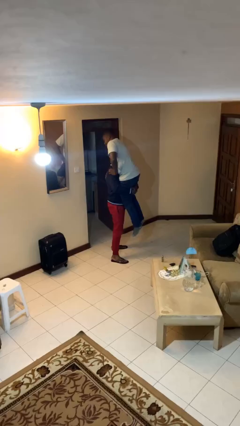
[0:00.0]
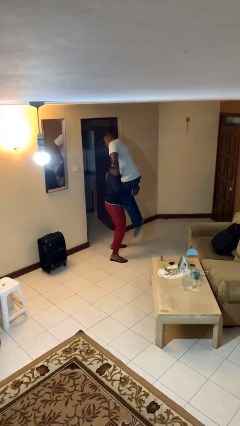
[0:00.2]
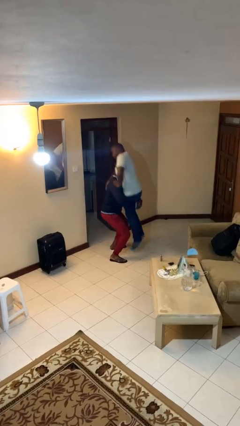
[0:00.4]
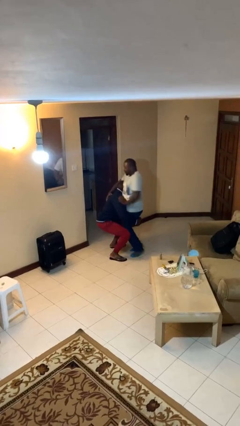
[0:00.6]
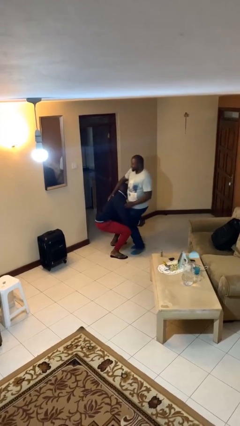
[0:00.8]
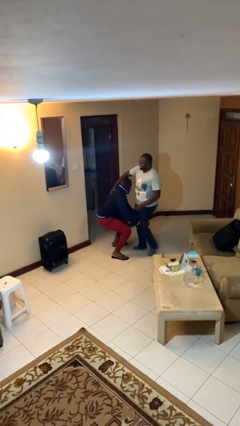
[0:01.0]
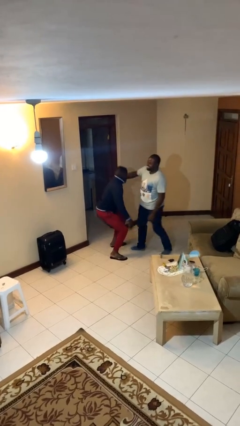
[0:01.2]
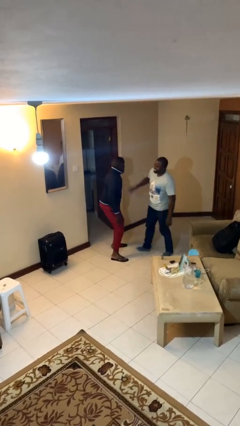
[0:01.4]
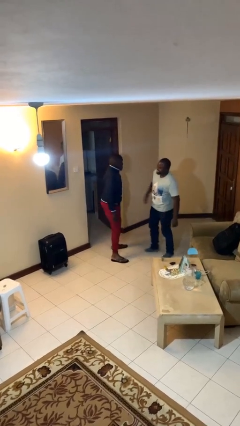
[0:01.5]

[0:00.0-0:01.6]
person puts down person

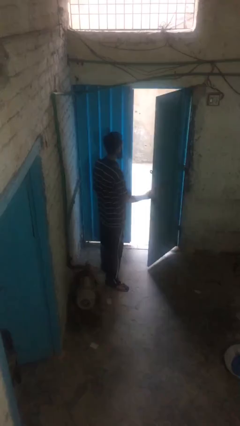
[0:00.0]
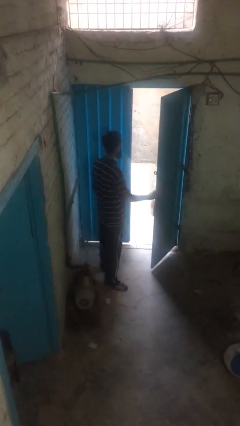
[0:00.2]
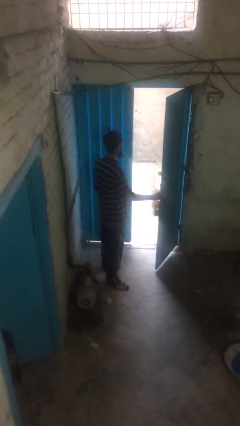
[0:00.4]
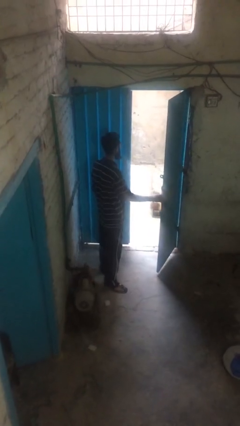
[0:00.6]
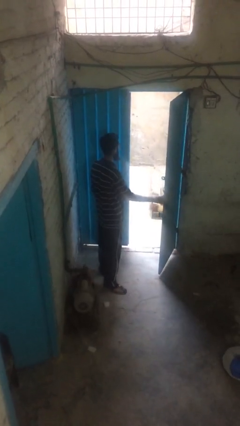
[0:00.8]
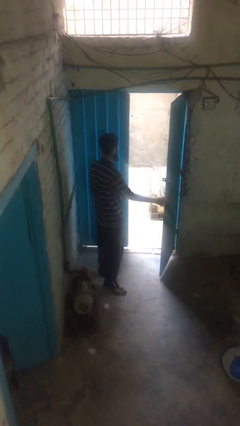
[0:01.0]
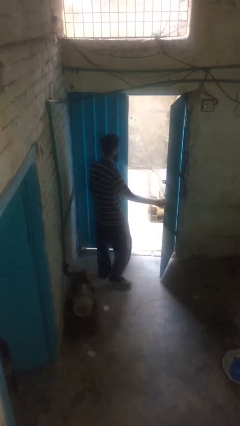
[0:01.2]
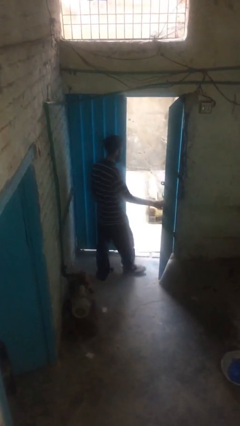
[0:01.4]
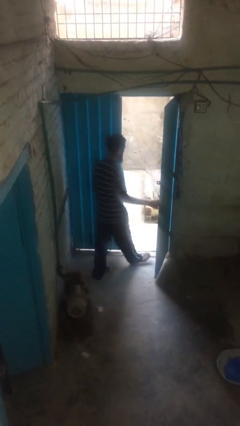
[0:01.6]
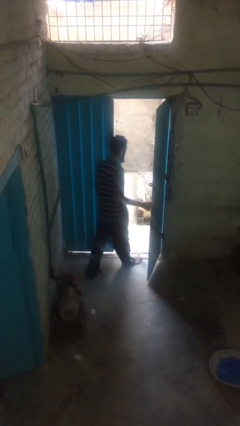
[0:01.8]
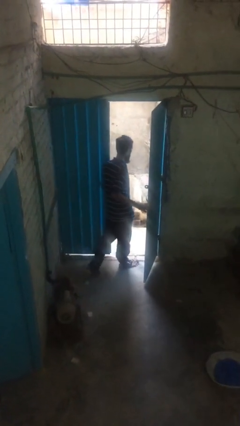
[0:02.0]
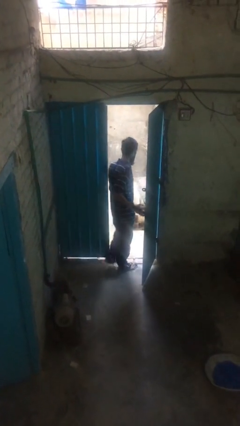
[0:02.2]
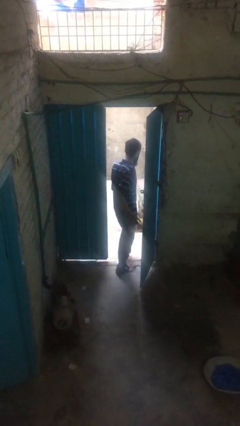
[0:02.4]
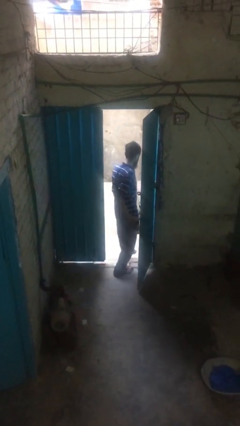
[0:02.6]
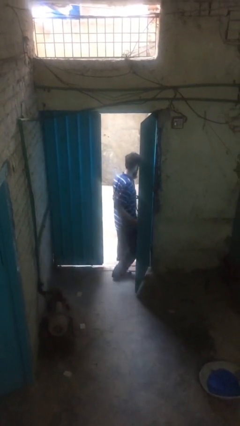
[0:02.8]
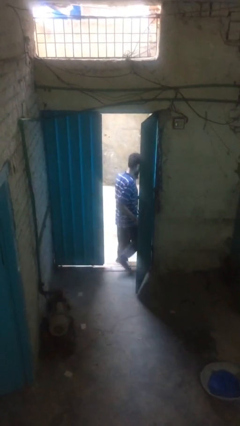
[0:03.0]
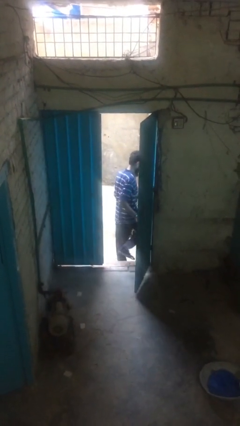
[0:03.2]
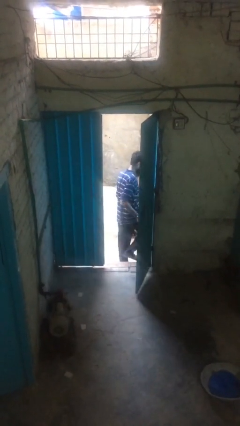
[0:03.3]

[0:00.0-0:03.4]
person exits scene through structure

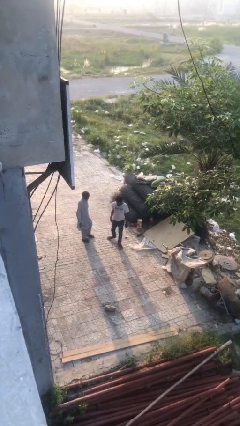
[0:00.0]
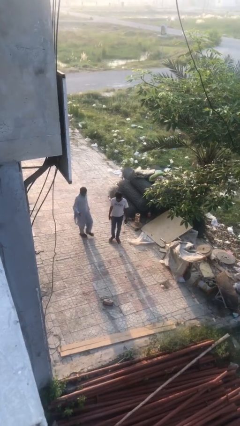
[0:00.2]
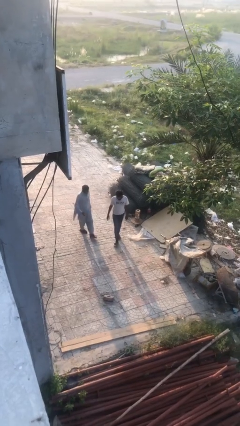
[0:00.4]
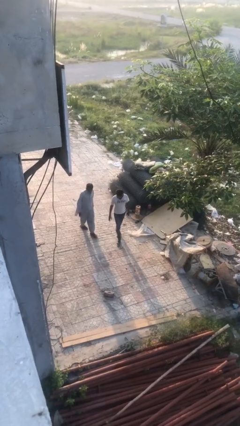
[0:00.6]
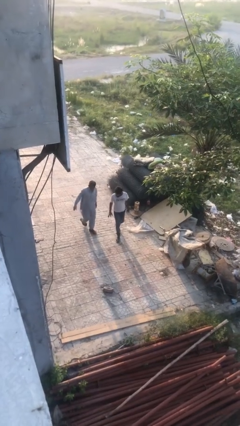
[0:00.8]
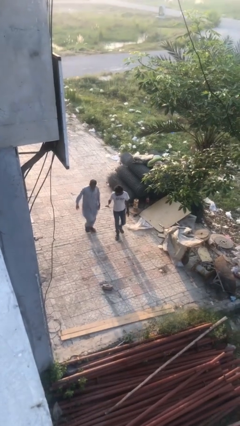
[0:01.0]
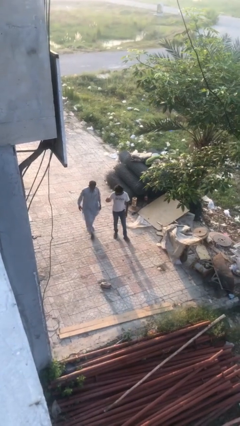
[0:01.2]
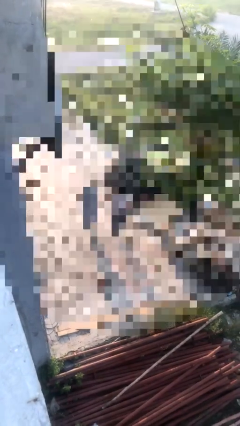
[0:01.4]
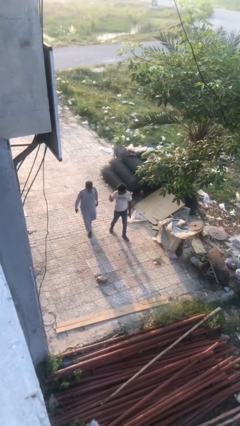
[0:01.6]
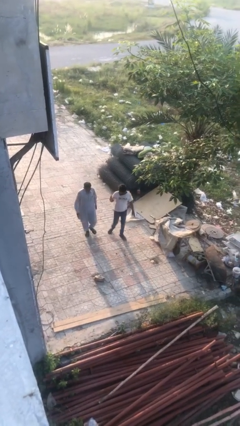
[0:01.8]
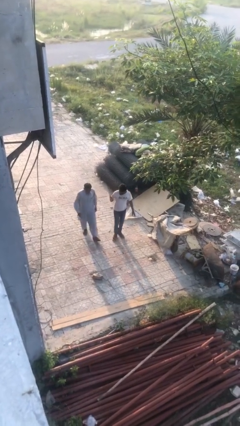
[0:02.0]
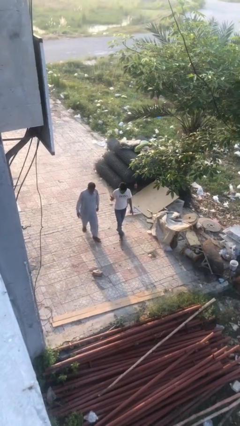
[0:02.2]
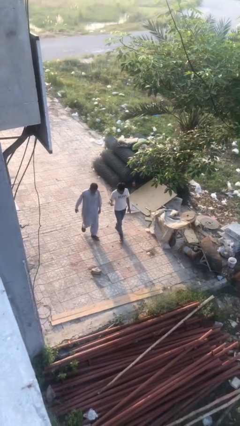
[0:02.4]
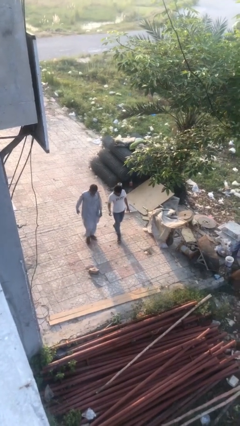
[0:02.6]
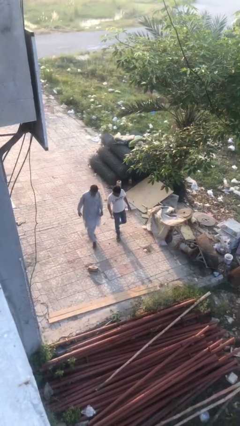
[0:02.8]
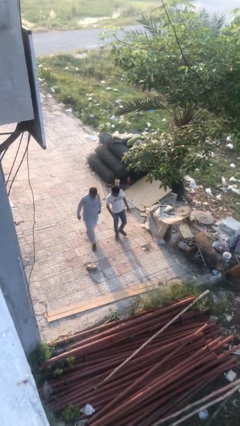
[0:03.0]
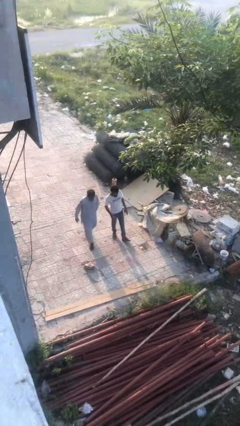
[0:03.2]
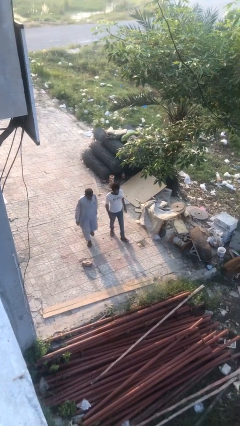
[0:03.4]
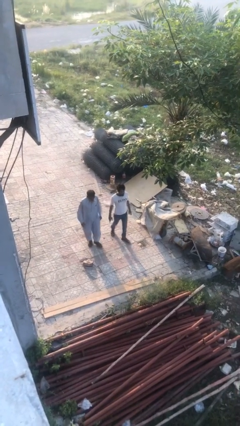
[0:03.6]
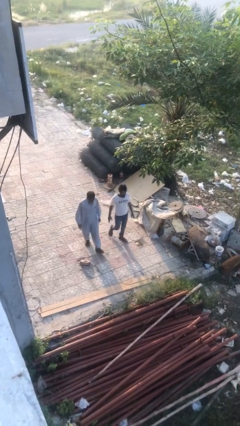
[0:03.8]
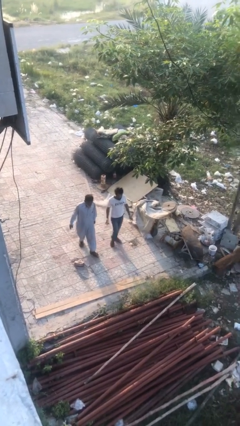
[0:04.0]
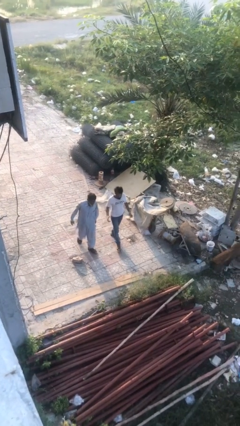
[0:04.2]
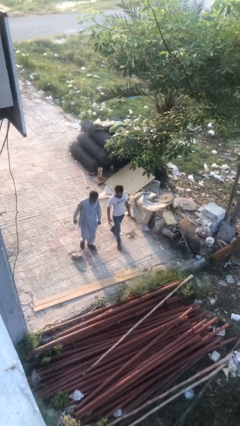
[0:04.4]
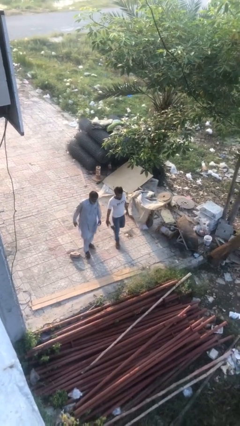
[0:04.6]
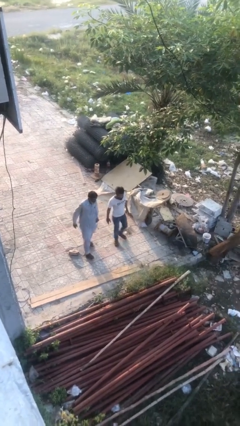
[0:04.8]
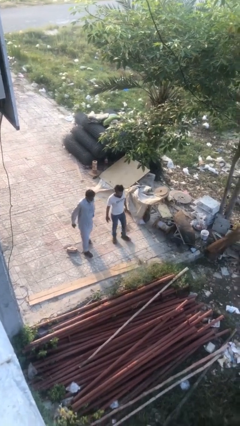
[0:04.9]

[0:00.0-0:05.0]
person talks to person

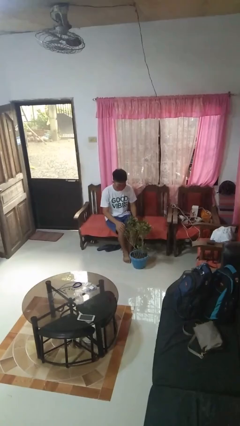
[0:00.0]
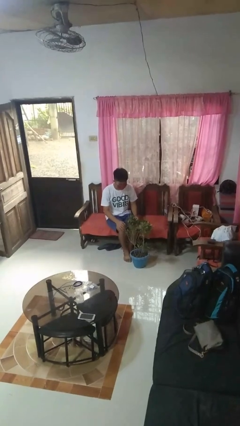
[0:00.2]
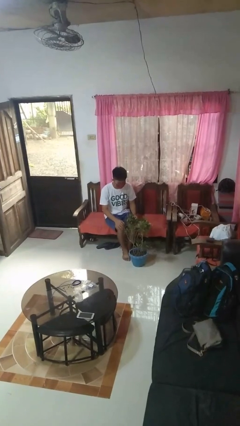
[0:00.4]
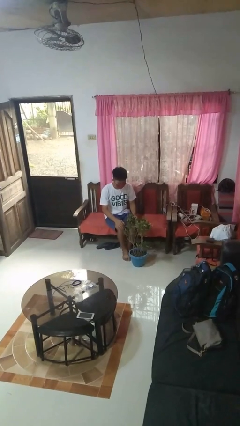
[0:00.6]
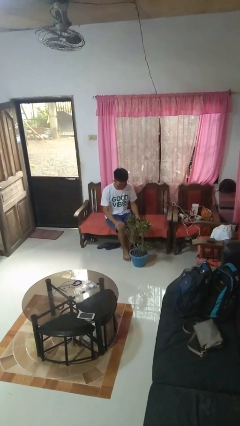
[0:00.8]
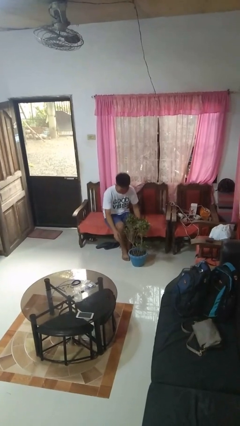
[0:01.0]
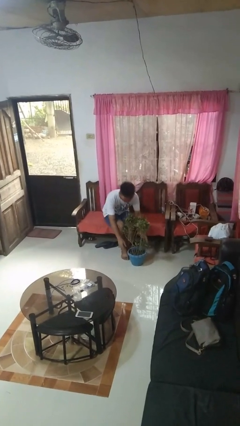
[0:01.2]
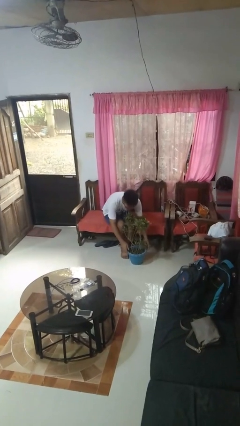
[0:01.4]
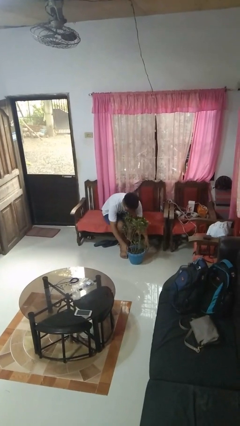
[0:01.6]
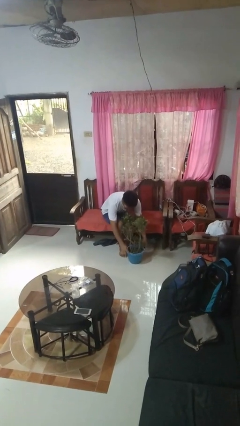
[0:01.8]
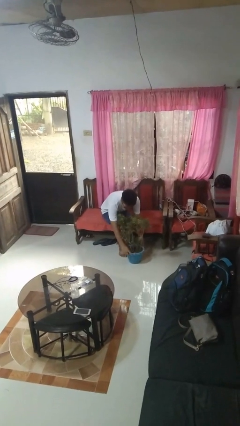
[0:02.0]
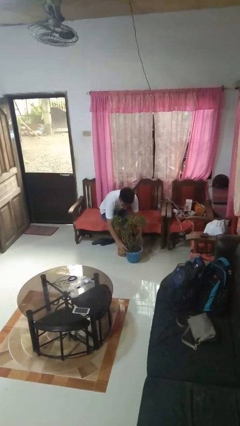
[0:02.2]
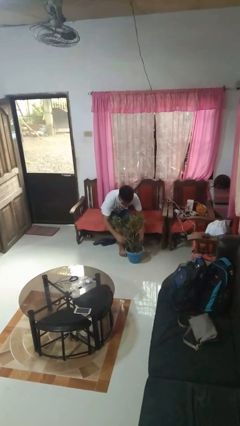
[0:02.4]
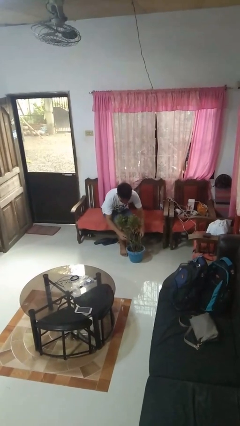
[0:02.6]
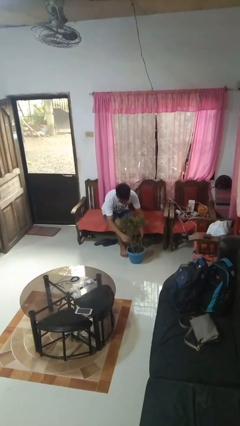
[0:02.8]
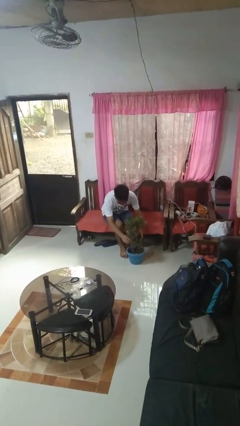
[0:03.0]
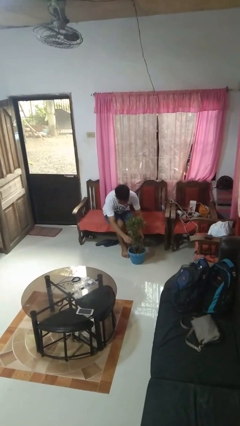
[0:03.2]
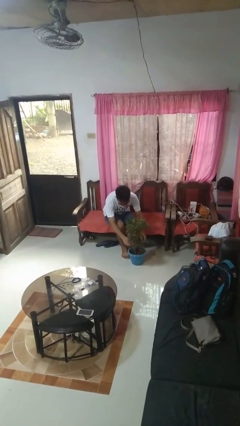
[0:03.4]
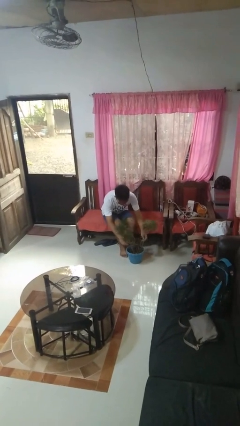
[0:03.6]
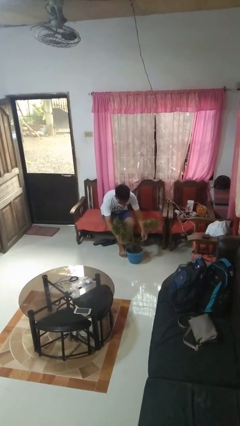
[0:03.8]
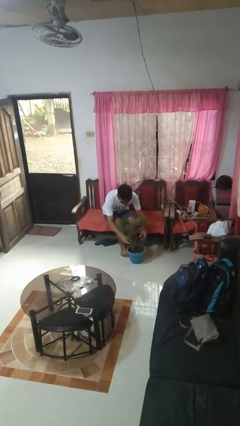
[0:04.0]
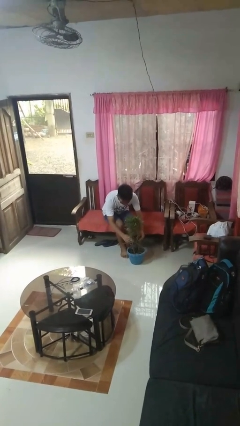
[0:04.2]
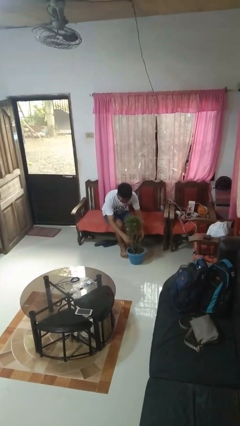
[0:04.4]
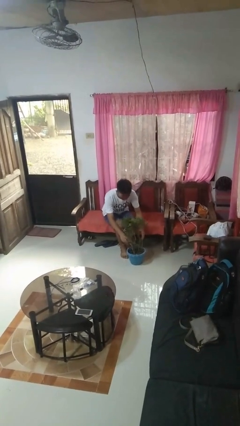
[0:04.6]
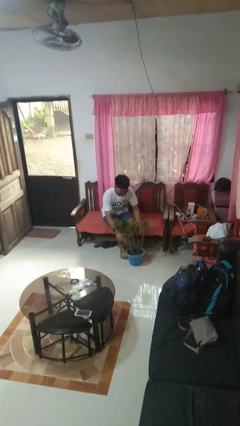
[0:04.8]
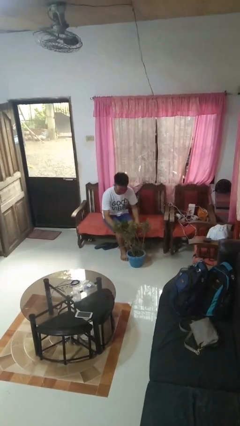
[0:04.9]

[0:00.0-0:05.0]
person arranges flowers in vase

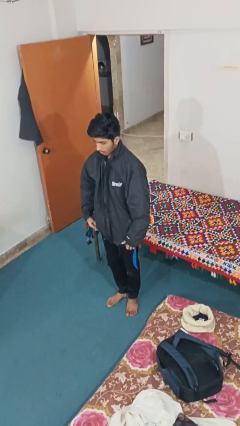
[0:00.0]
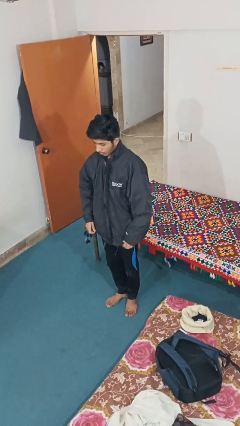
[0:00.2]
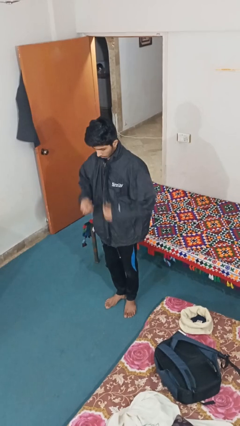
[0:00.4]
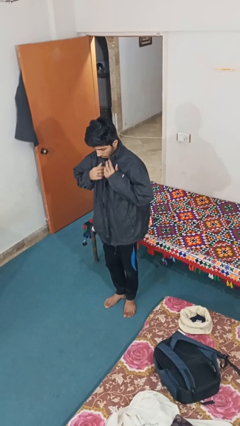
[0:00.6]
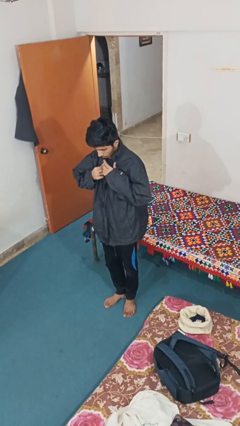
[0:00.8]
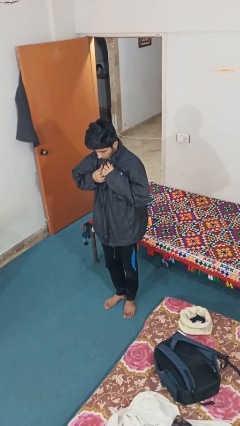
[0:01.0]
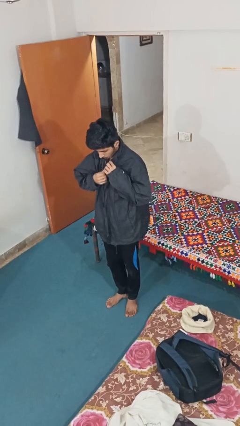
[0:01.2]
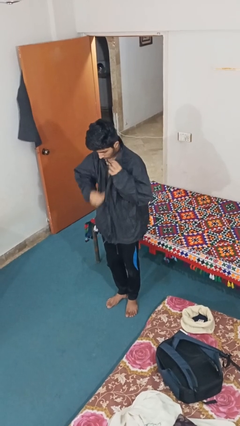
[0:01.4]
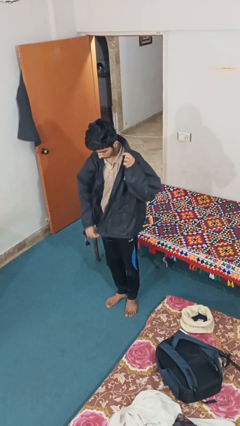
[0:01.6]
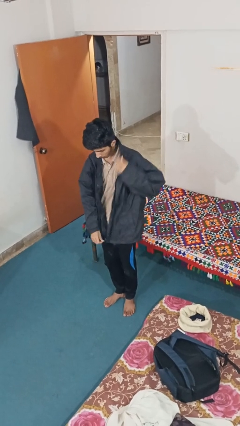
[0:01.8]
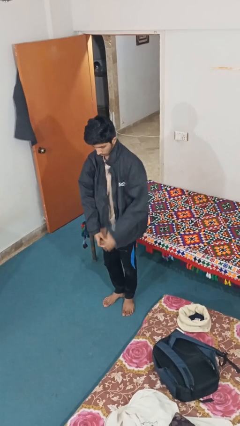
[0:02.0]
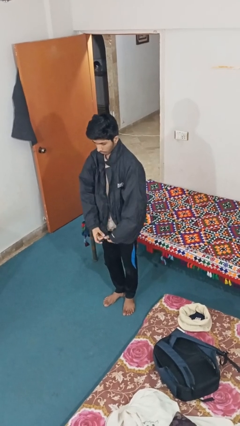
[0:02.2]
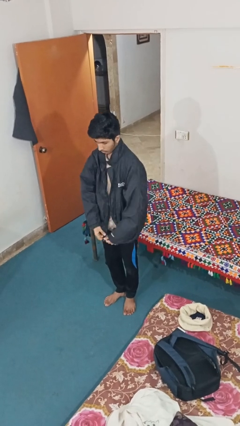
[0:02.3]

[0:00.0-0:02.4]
person unzips jacket

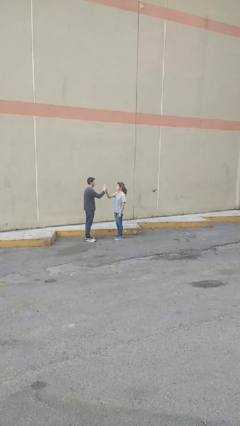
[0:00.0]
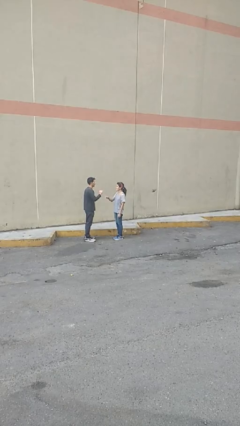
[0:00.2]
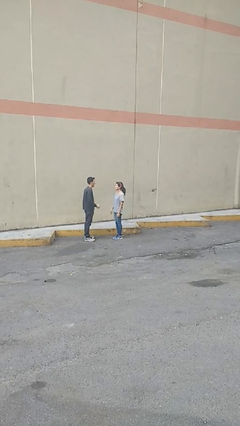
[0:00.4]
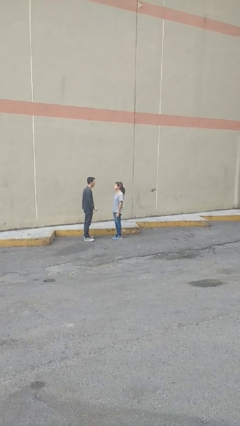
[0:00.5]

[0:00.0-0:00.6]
person highfives hand
